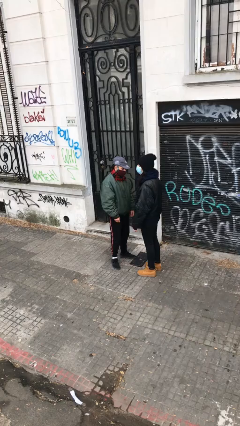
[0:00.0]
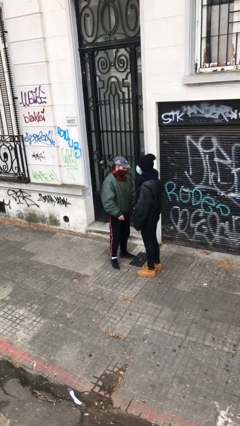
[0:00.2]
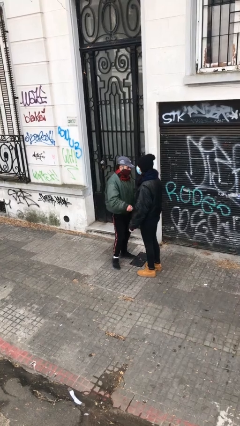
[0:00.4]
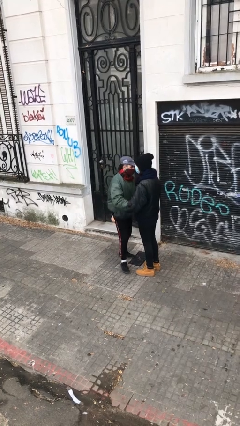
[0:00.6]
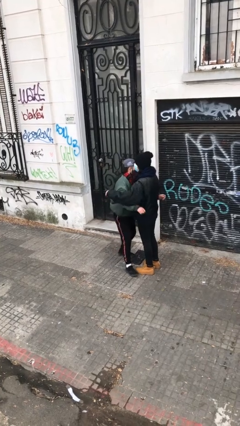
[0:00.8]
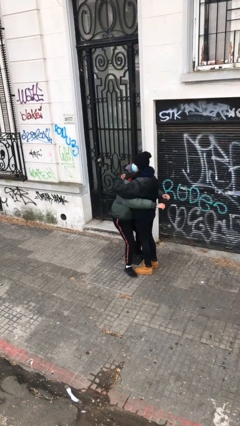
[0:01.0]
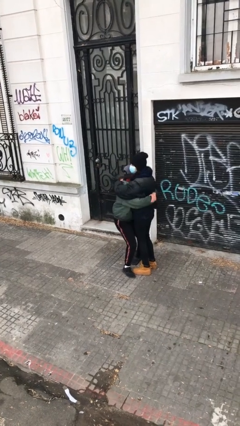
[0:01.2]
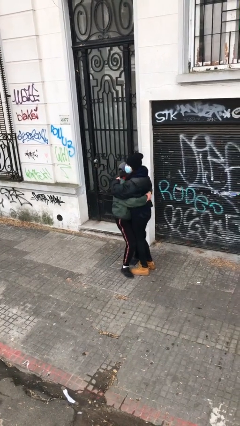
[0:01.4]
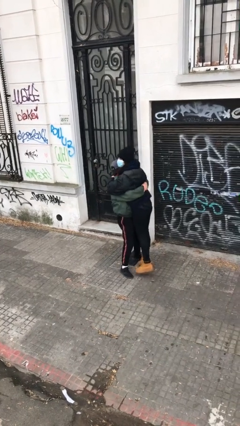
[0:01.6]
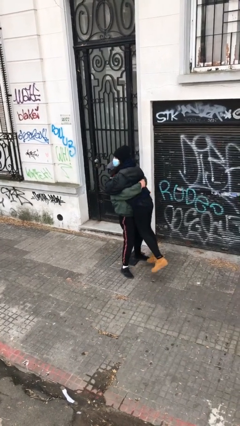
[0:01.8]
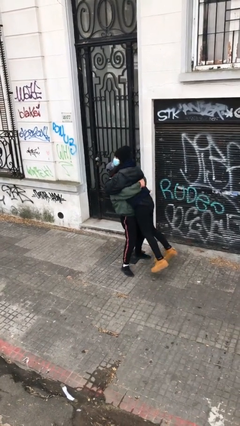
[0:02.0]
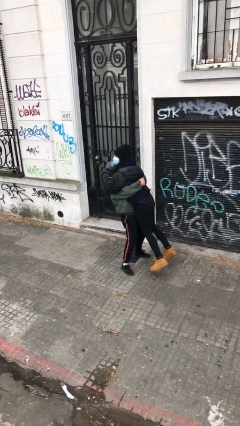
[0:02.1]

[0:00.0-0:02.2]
person picks up person

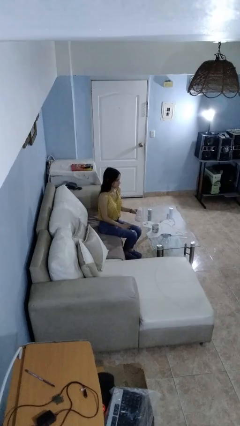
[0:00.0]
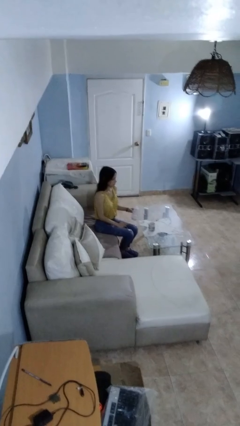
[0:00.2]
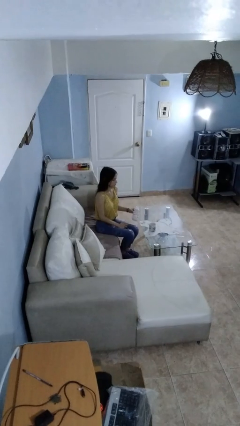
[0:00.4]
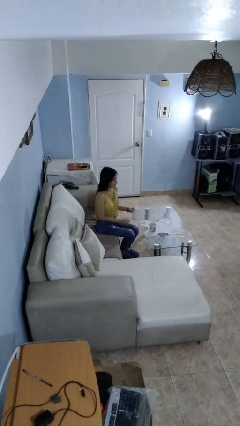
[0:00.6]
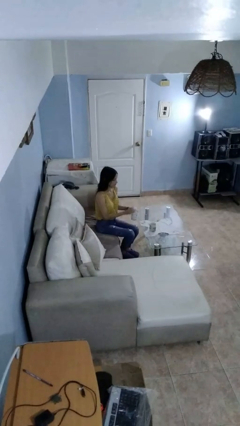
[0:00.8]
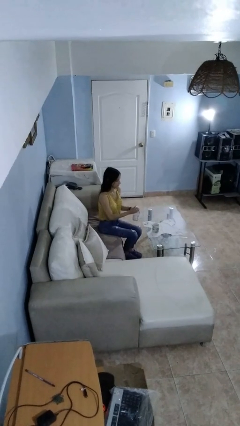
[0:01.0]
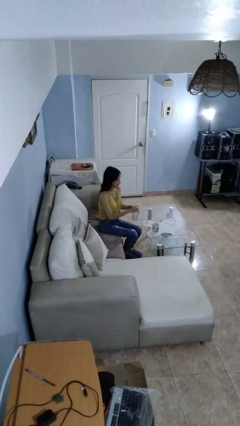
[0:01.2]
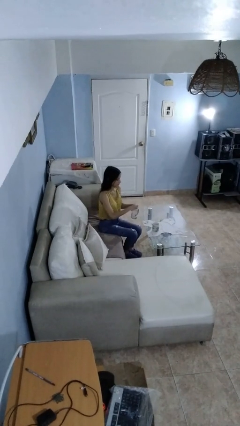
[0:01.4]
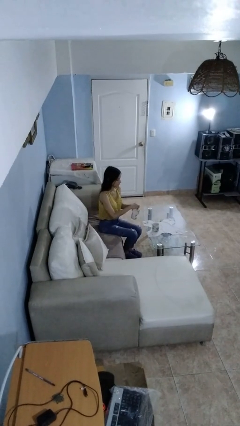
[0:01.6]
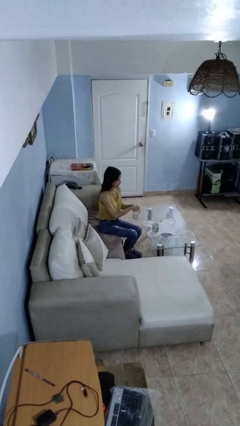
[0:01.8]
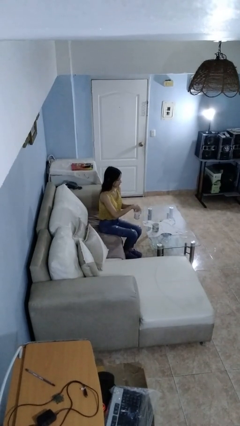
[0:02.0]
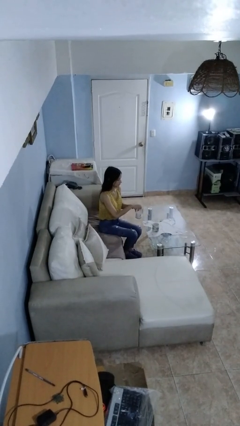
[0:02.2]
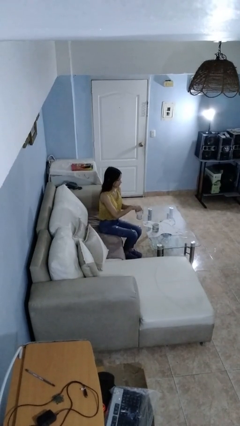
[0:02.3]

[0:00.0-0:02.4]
person screws lid to bottle

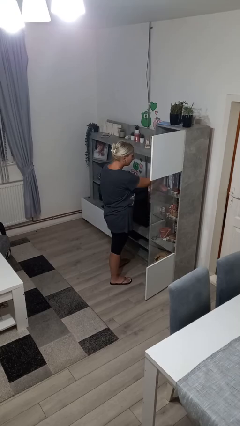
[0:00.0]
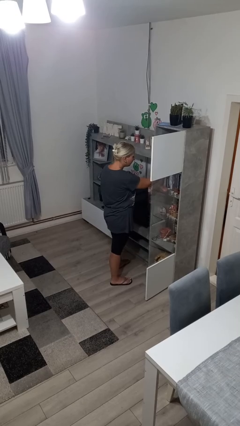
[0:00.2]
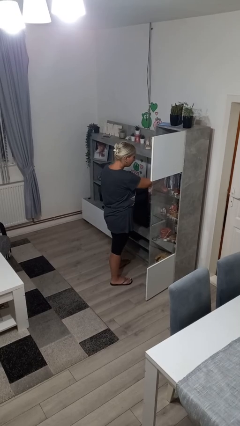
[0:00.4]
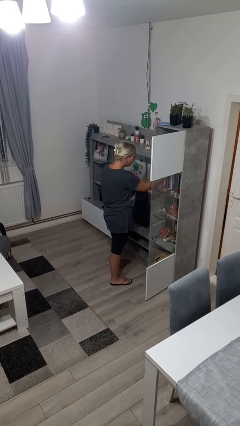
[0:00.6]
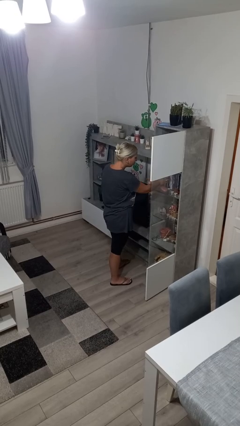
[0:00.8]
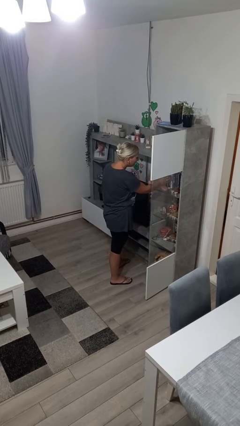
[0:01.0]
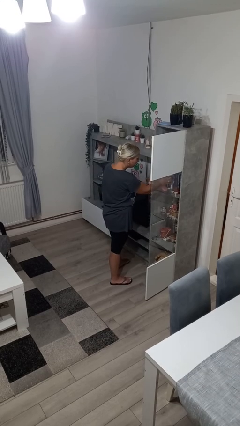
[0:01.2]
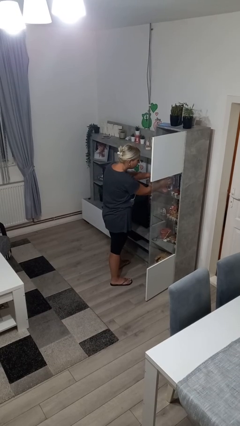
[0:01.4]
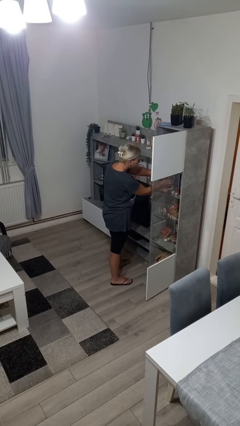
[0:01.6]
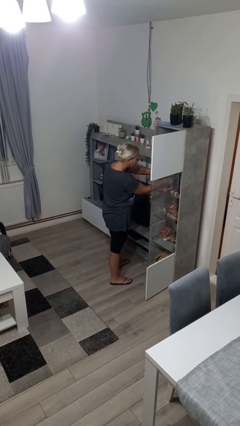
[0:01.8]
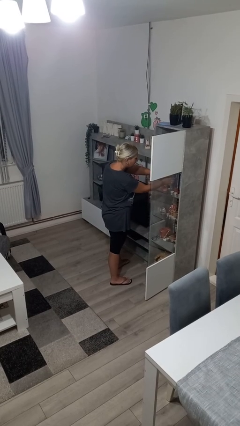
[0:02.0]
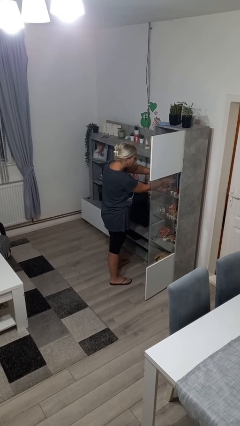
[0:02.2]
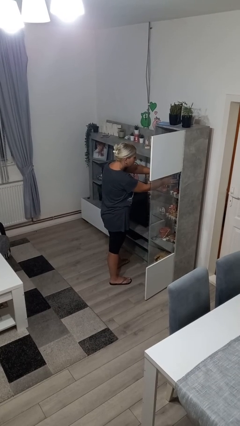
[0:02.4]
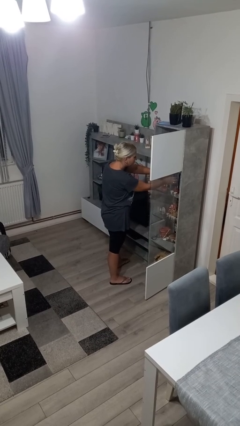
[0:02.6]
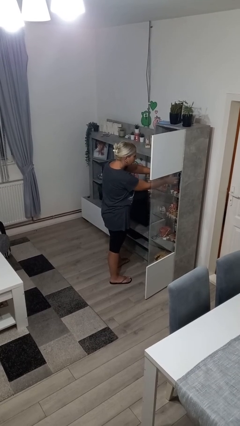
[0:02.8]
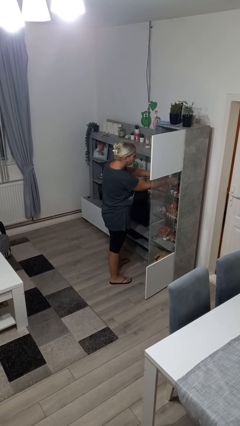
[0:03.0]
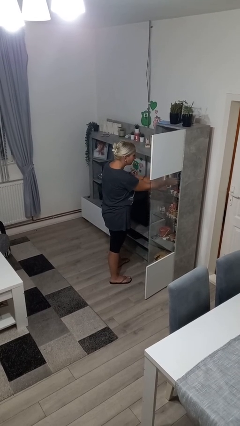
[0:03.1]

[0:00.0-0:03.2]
person searches in cabinet

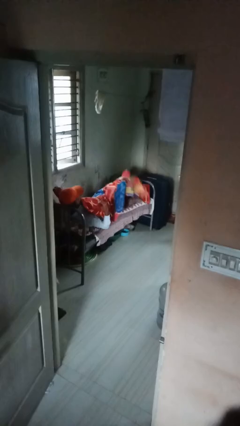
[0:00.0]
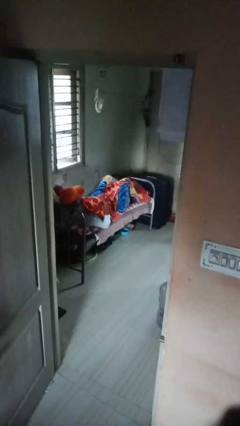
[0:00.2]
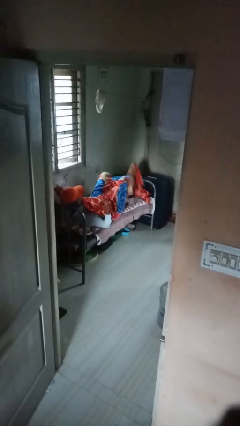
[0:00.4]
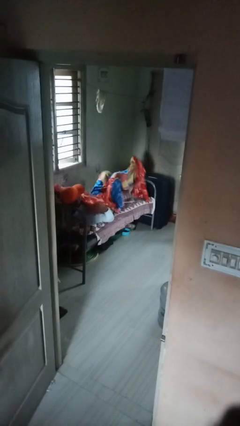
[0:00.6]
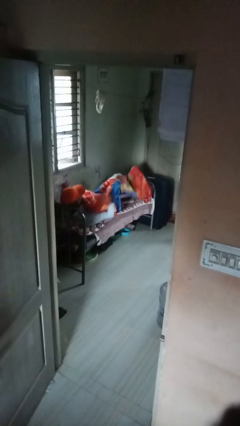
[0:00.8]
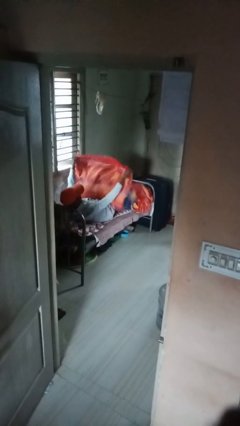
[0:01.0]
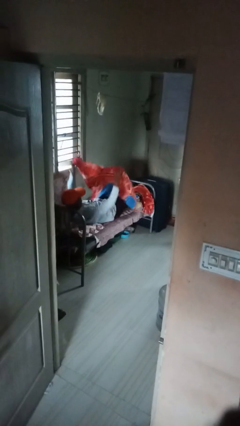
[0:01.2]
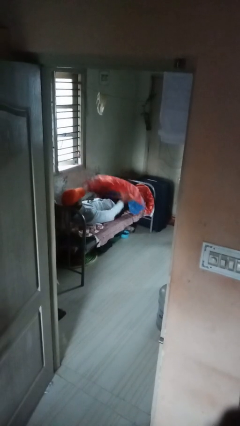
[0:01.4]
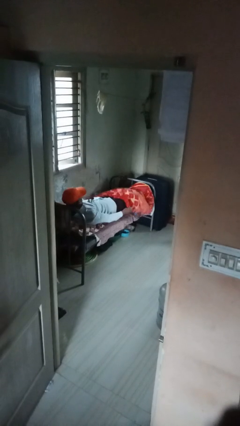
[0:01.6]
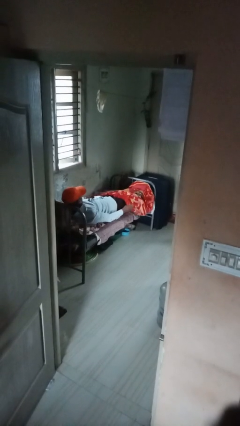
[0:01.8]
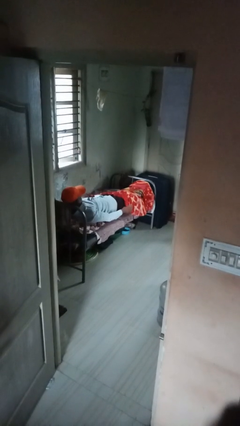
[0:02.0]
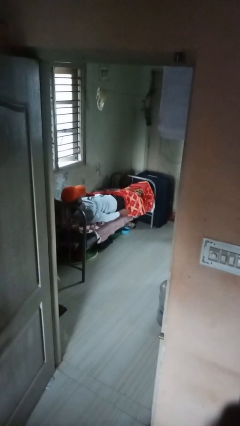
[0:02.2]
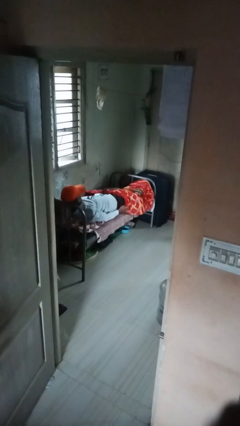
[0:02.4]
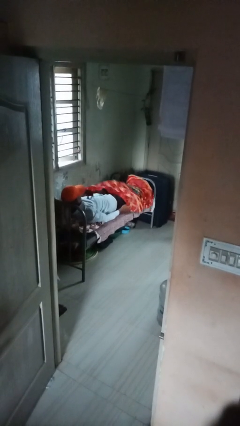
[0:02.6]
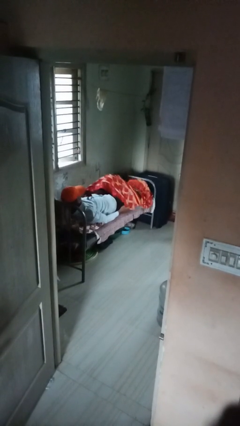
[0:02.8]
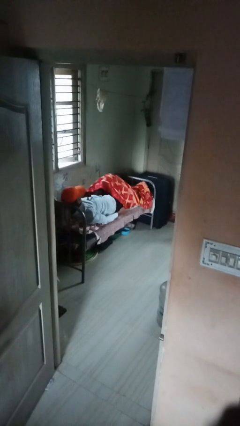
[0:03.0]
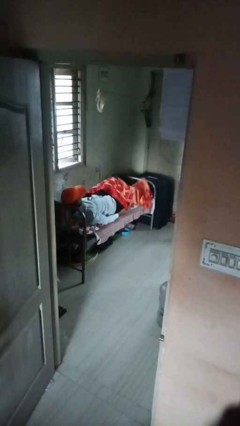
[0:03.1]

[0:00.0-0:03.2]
person uncovers with bedsheets

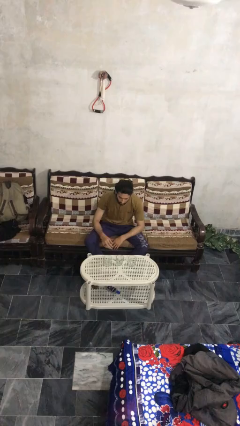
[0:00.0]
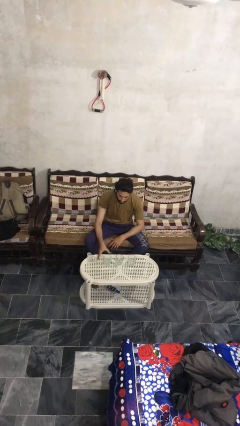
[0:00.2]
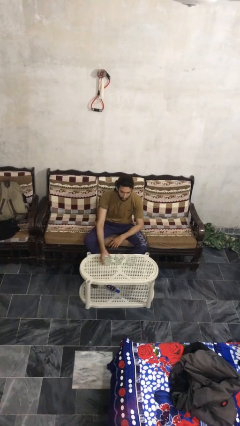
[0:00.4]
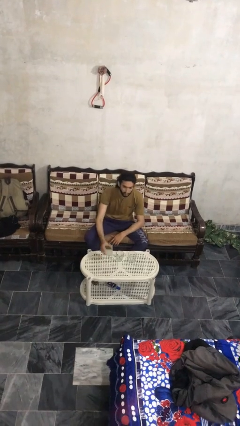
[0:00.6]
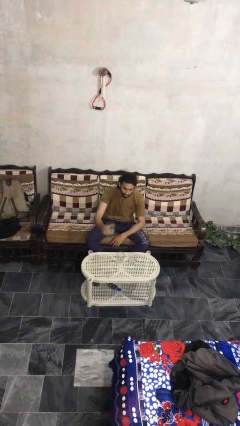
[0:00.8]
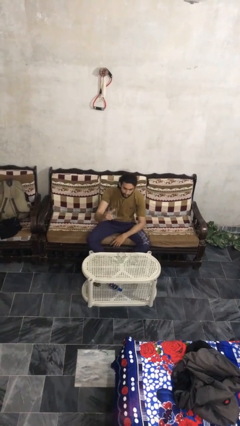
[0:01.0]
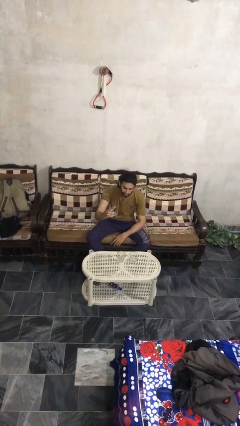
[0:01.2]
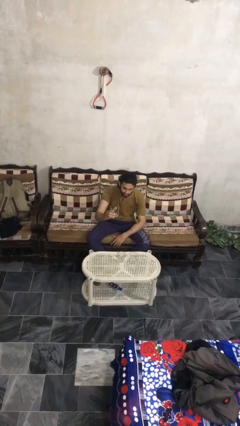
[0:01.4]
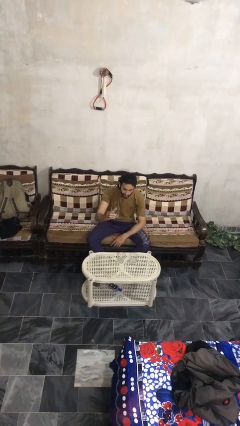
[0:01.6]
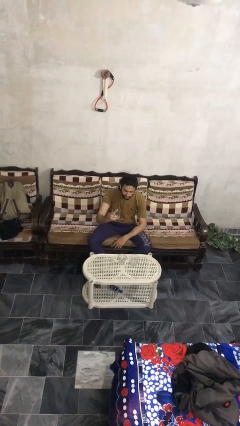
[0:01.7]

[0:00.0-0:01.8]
person picks up object from table

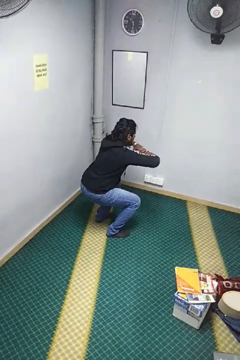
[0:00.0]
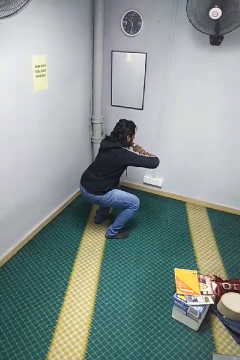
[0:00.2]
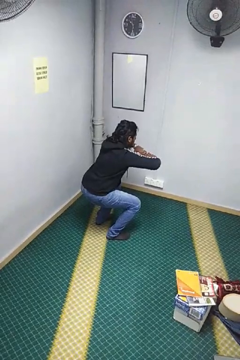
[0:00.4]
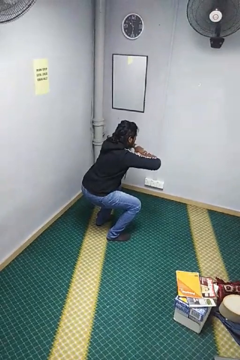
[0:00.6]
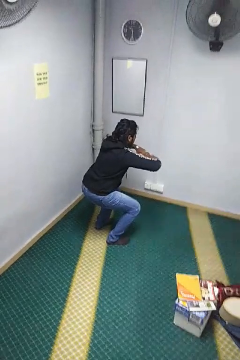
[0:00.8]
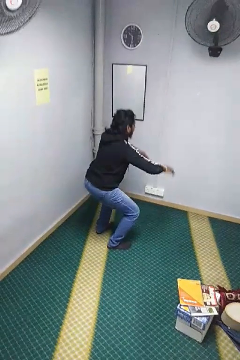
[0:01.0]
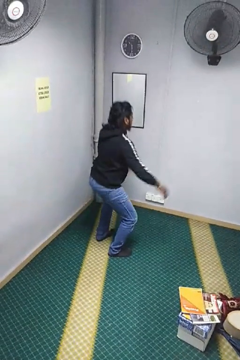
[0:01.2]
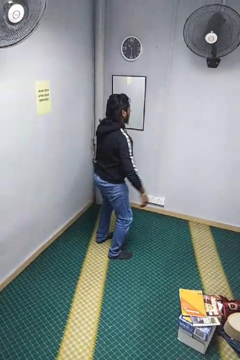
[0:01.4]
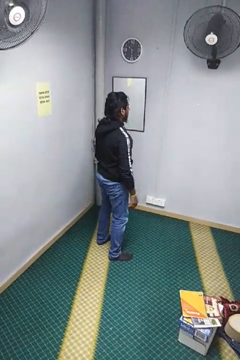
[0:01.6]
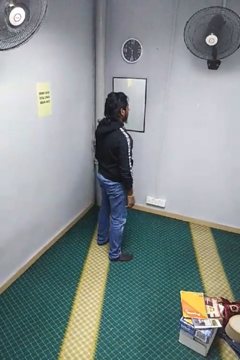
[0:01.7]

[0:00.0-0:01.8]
person stands up

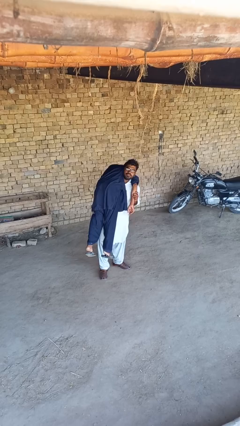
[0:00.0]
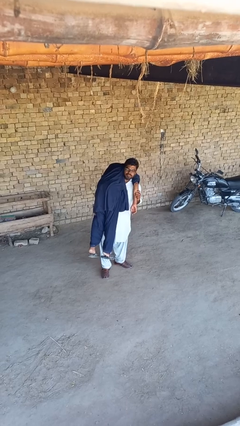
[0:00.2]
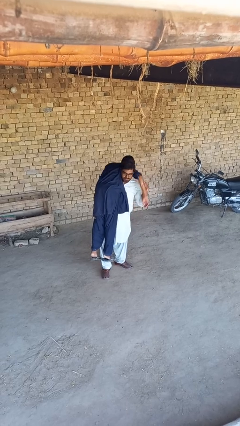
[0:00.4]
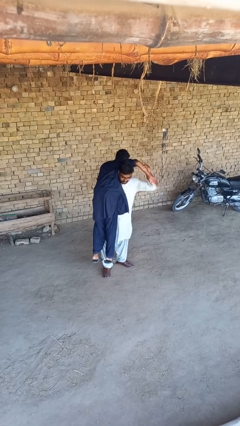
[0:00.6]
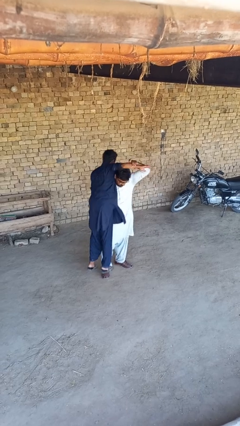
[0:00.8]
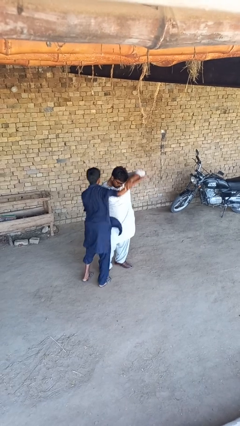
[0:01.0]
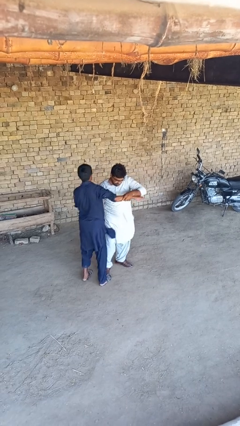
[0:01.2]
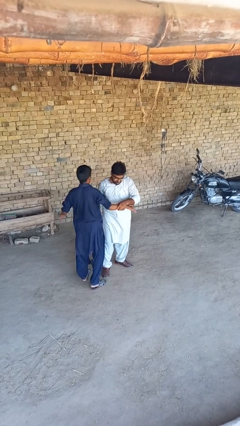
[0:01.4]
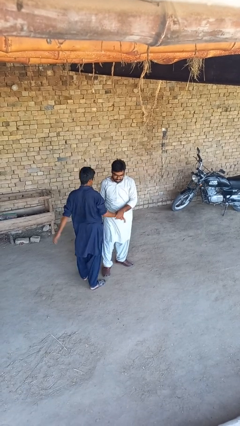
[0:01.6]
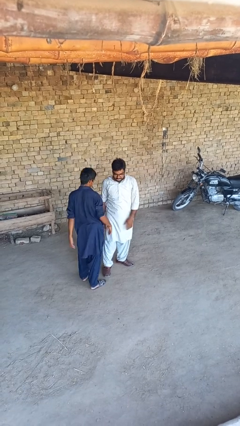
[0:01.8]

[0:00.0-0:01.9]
person puts down person

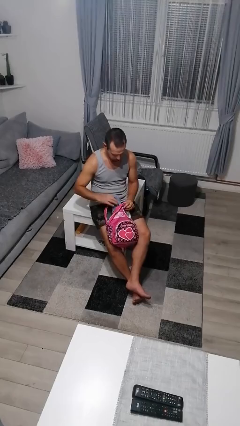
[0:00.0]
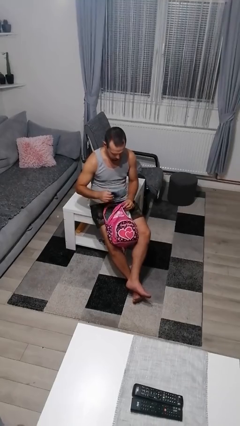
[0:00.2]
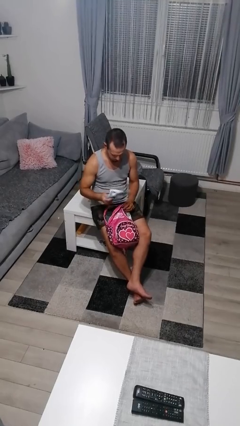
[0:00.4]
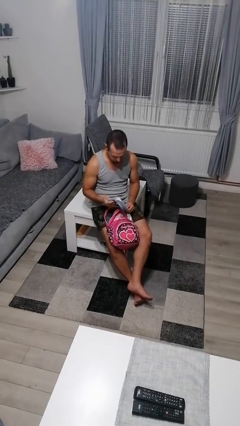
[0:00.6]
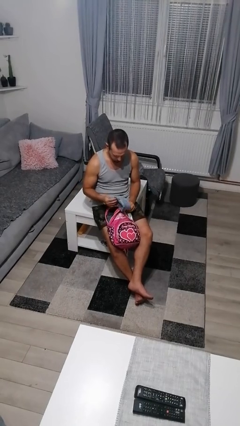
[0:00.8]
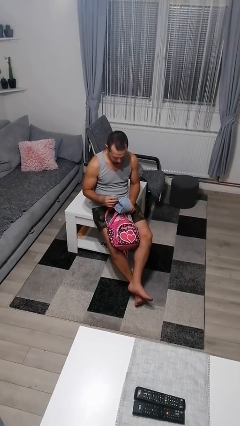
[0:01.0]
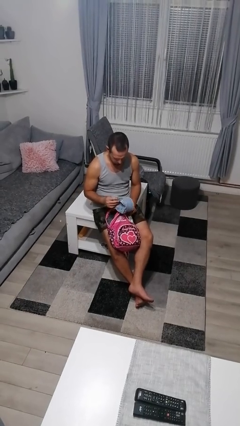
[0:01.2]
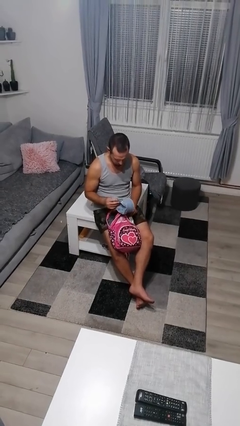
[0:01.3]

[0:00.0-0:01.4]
person takes object from backpack
